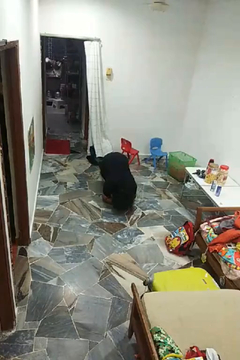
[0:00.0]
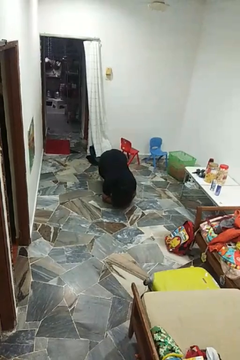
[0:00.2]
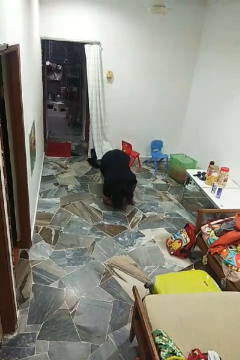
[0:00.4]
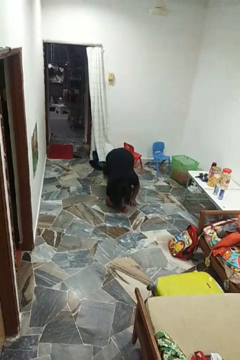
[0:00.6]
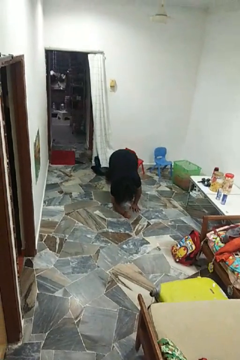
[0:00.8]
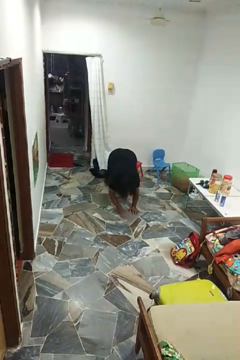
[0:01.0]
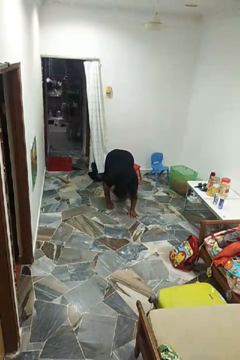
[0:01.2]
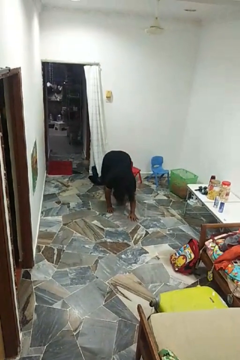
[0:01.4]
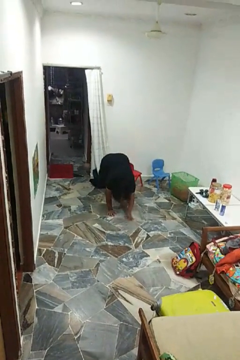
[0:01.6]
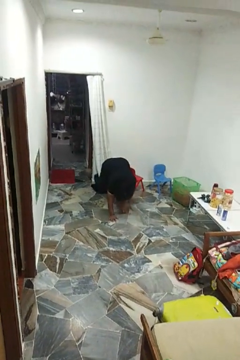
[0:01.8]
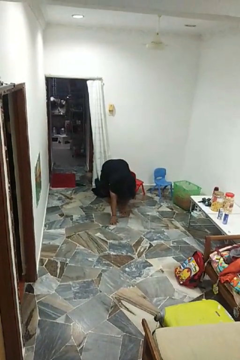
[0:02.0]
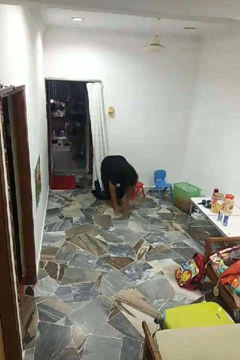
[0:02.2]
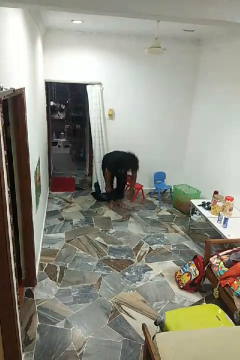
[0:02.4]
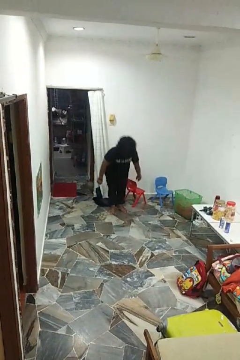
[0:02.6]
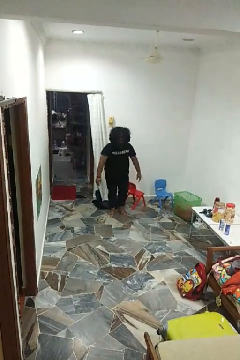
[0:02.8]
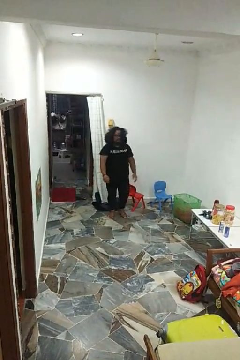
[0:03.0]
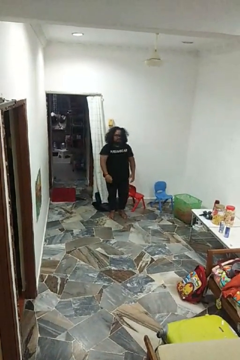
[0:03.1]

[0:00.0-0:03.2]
person stands up from floor

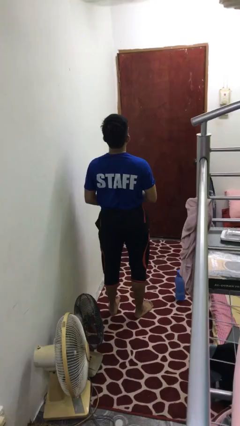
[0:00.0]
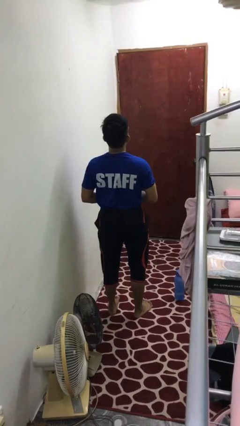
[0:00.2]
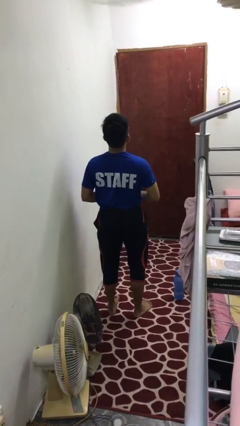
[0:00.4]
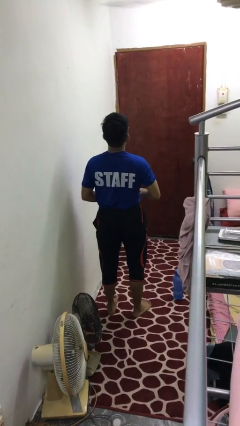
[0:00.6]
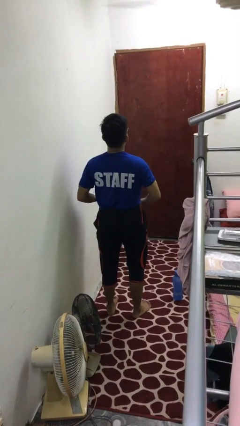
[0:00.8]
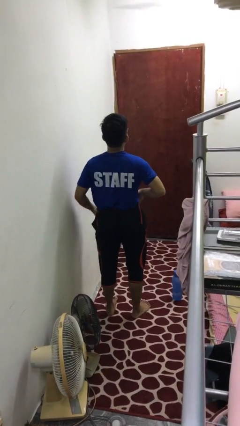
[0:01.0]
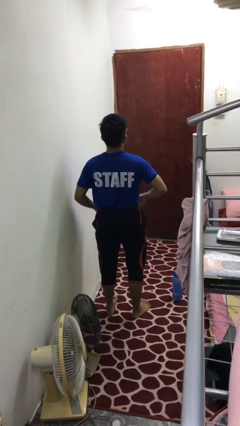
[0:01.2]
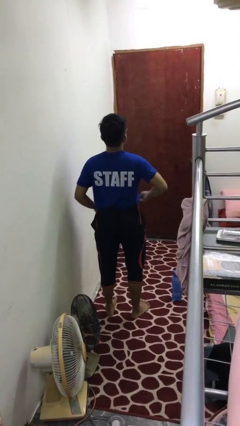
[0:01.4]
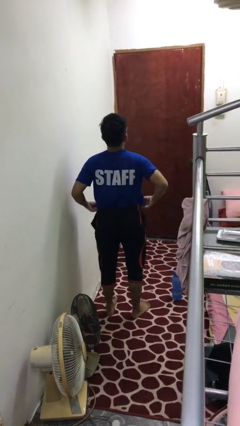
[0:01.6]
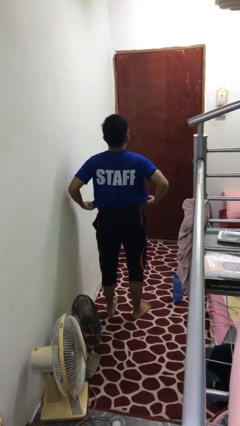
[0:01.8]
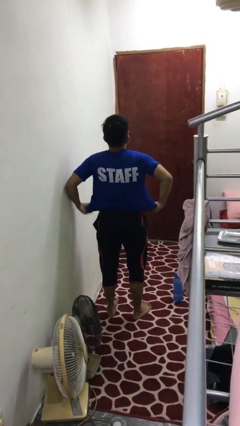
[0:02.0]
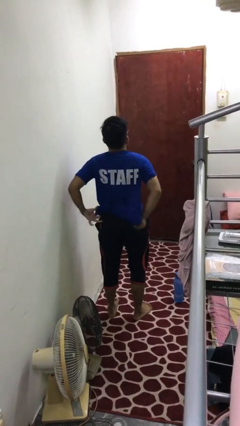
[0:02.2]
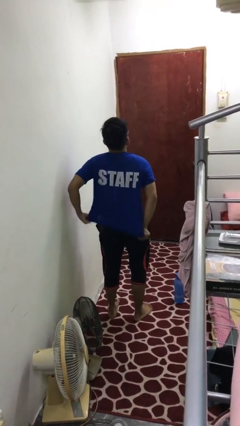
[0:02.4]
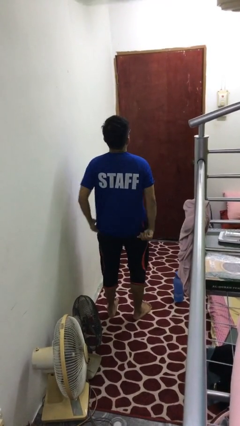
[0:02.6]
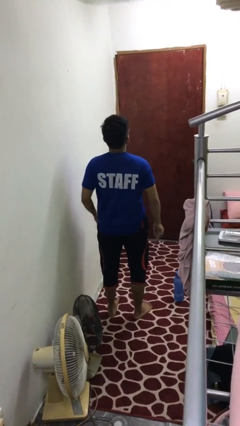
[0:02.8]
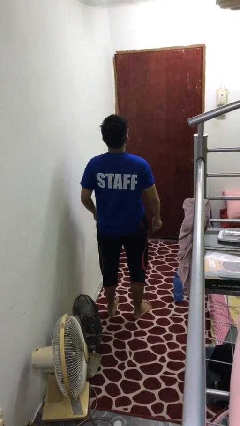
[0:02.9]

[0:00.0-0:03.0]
person untucks shirt

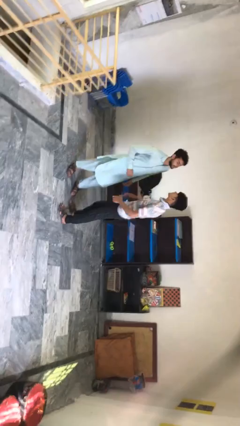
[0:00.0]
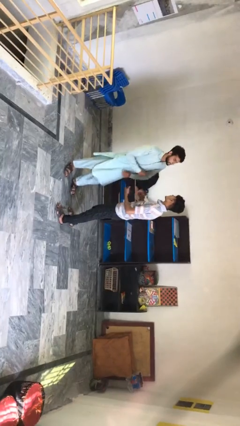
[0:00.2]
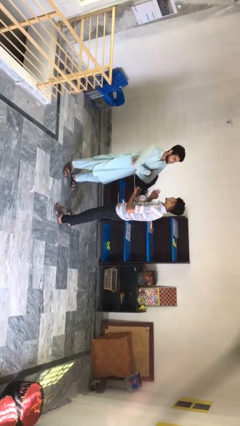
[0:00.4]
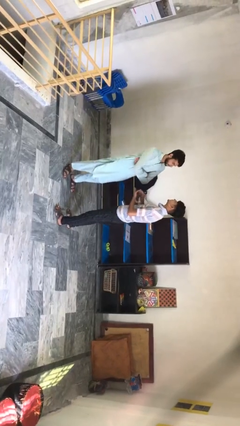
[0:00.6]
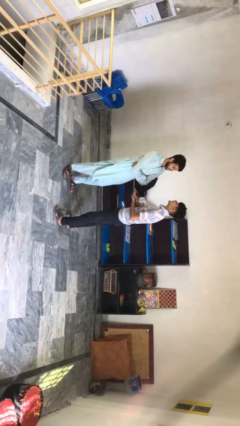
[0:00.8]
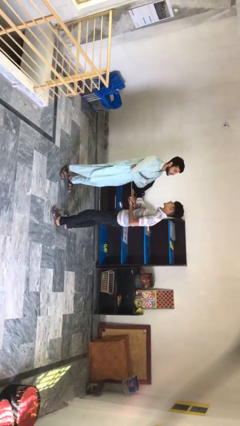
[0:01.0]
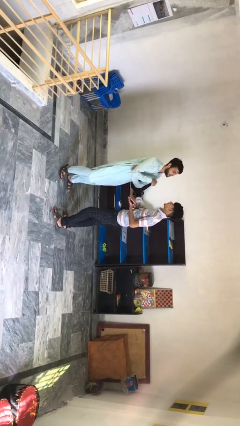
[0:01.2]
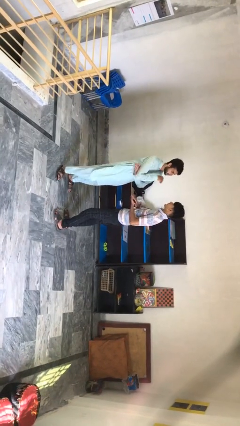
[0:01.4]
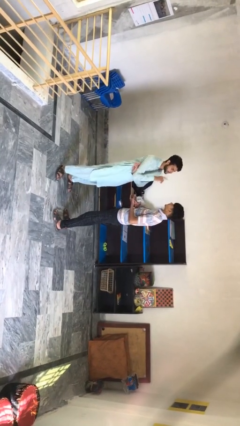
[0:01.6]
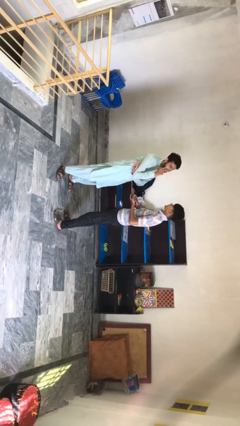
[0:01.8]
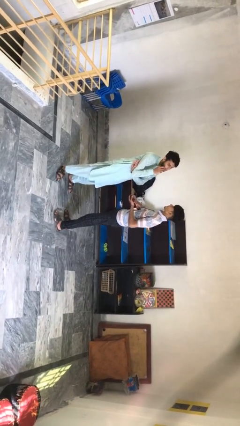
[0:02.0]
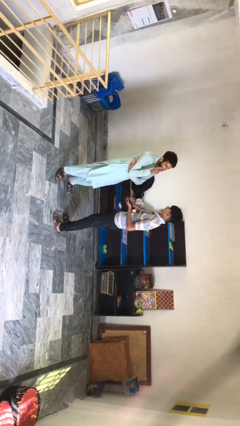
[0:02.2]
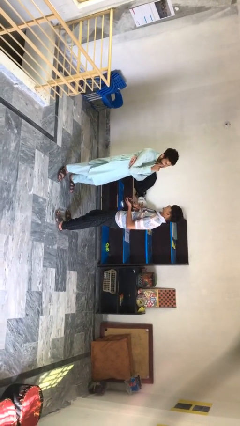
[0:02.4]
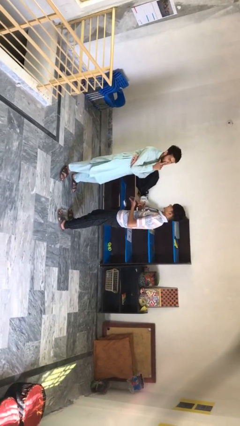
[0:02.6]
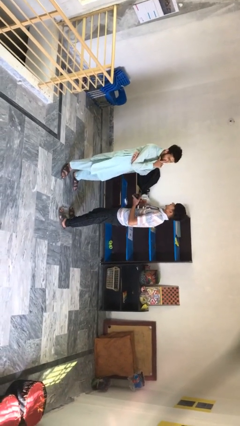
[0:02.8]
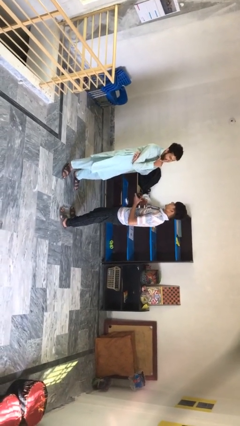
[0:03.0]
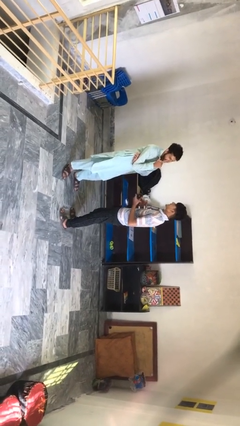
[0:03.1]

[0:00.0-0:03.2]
person talks to person

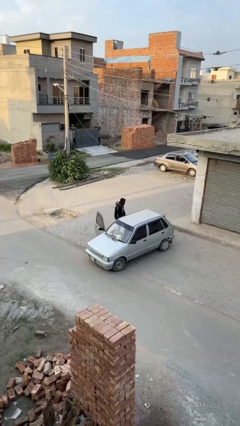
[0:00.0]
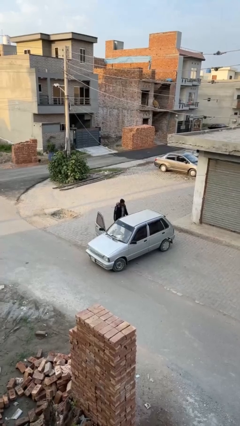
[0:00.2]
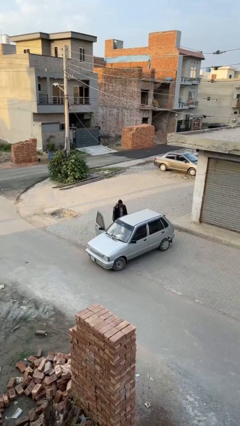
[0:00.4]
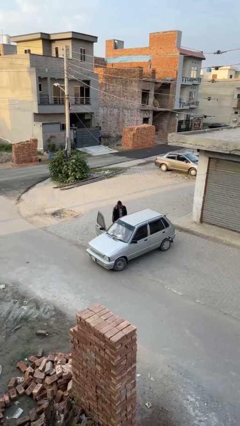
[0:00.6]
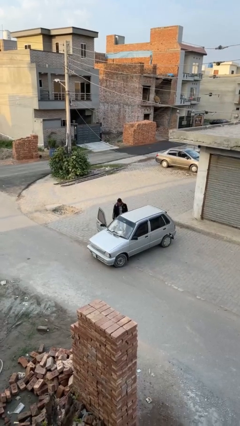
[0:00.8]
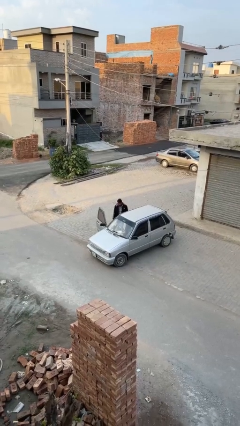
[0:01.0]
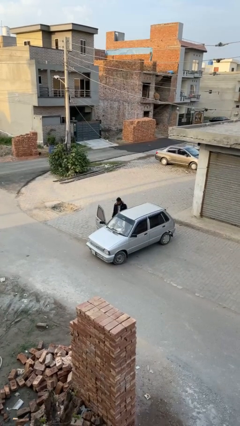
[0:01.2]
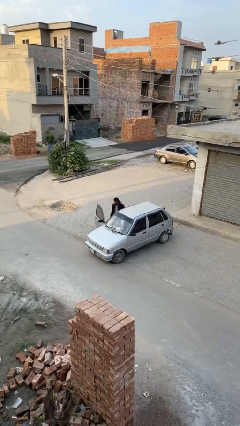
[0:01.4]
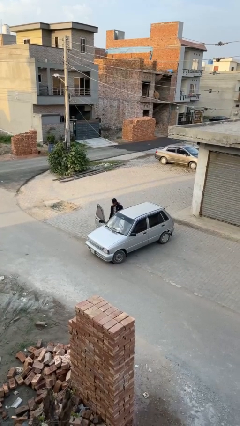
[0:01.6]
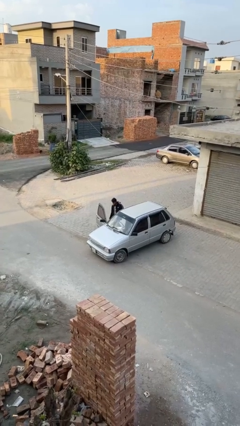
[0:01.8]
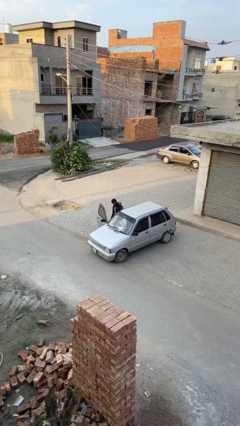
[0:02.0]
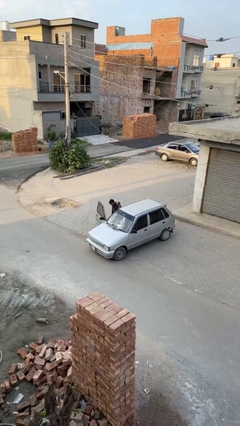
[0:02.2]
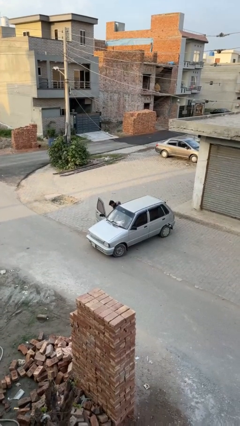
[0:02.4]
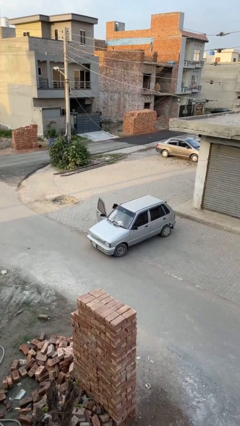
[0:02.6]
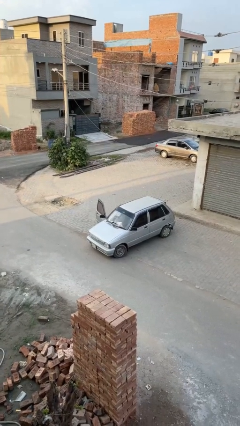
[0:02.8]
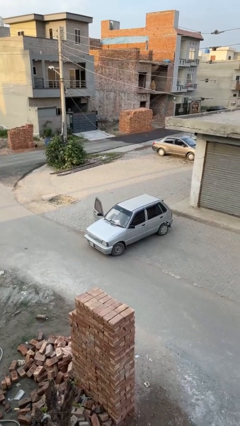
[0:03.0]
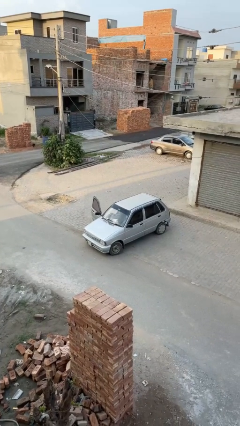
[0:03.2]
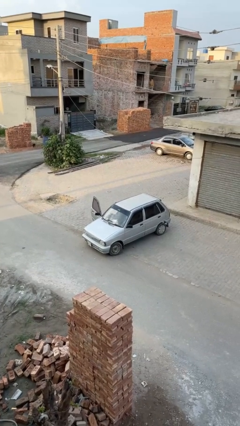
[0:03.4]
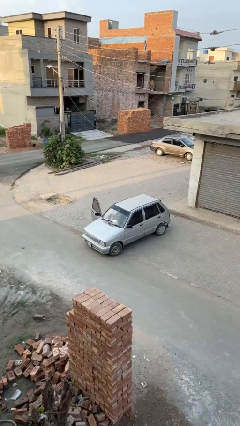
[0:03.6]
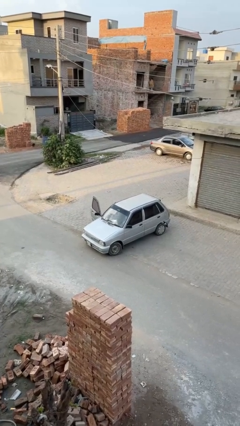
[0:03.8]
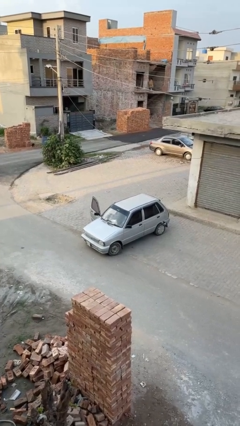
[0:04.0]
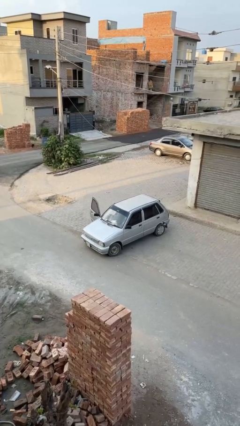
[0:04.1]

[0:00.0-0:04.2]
person enters car

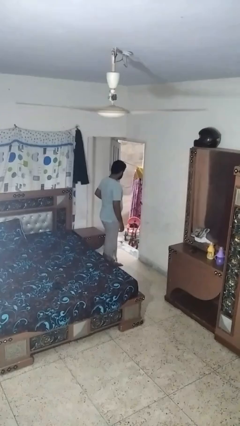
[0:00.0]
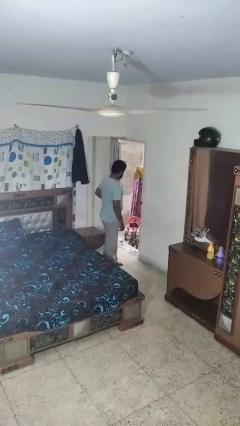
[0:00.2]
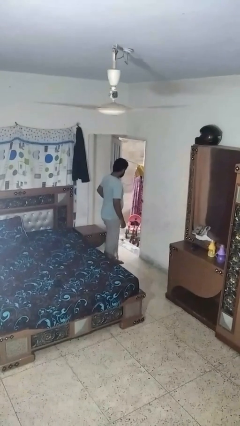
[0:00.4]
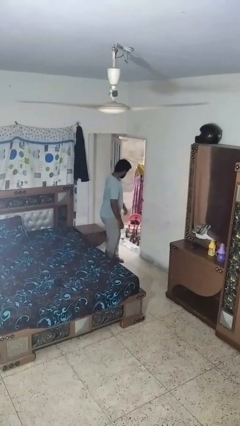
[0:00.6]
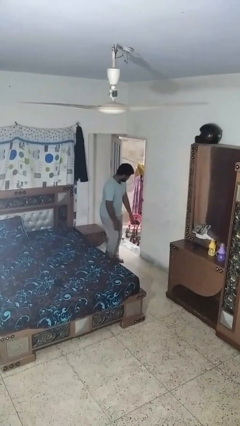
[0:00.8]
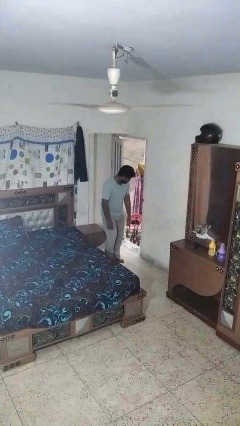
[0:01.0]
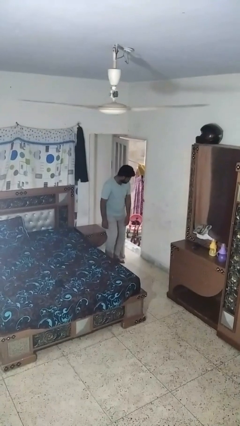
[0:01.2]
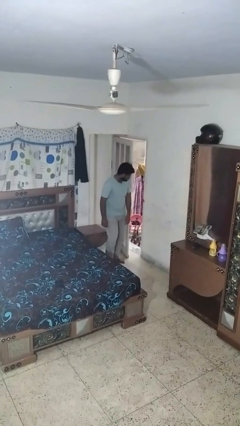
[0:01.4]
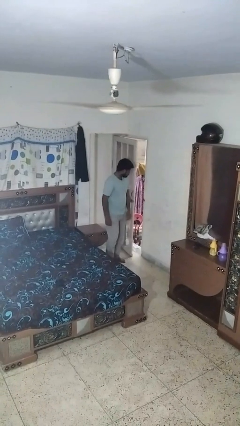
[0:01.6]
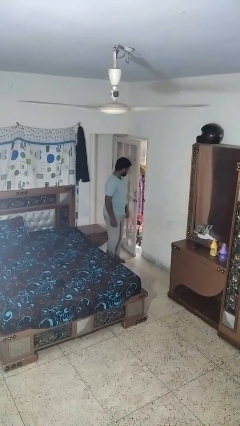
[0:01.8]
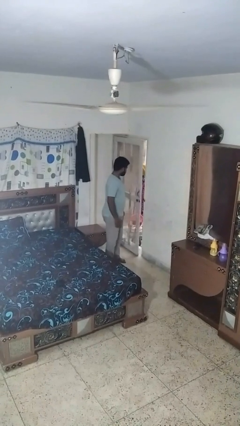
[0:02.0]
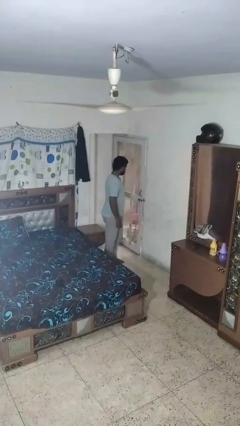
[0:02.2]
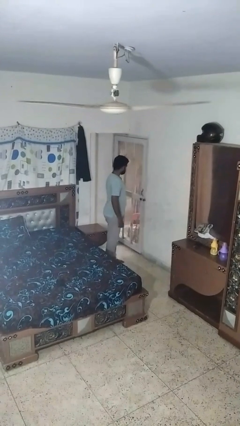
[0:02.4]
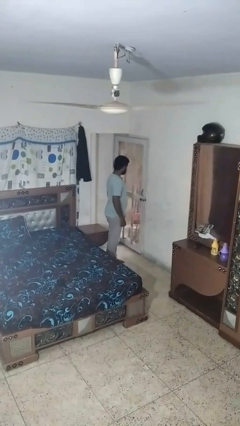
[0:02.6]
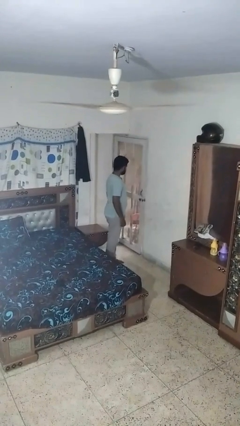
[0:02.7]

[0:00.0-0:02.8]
person closes door with hip

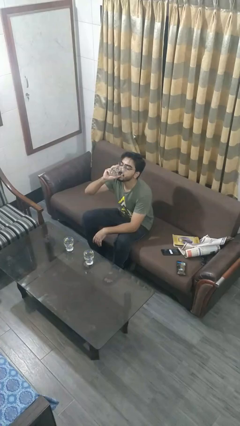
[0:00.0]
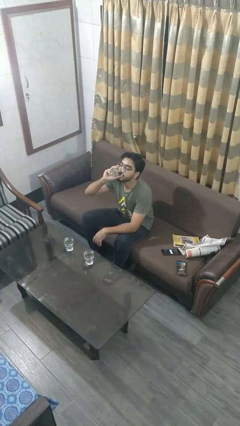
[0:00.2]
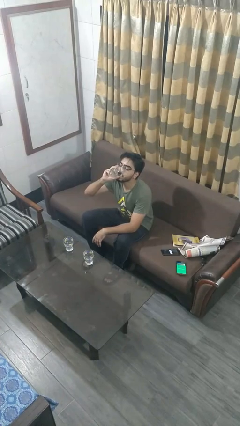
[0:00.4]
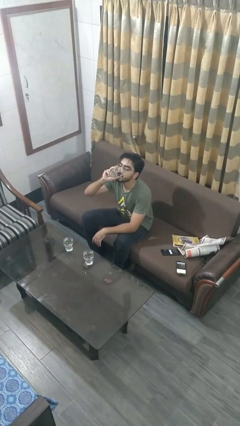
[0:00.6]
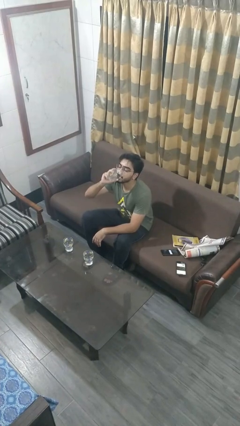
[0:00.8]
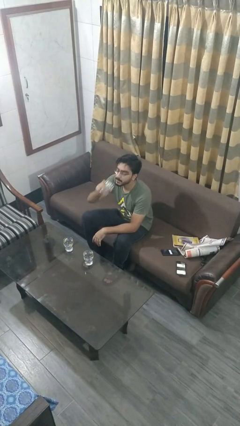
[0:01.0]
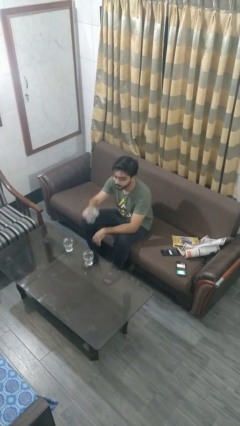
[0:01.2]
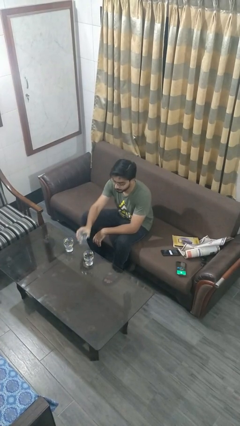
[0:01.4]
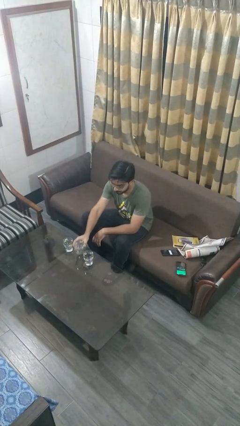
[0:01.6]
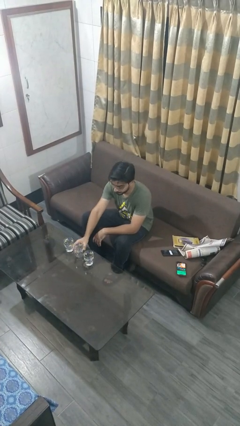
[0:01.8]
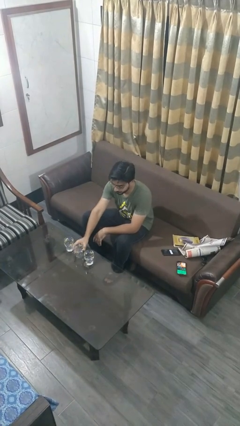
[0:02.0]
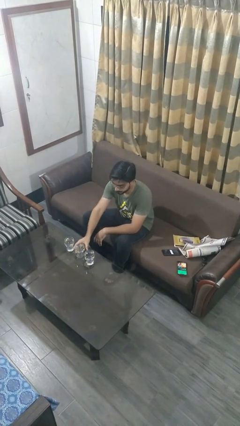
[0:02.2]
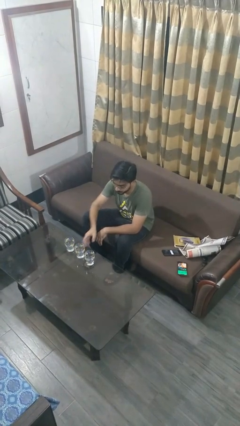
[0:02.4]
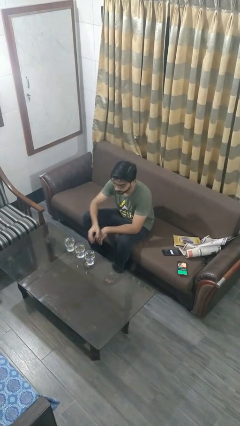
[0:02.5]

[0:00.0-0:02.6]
person puts down object on table
